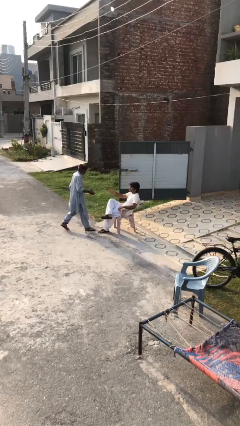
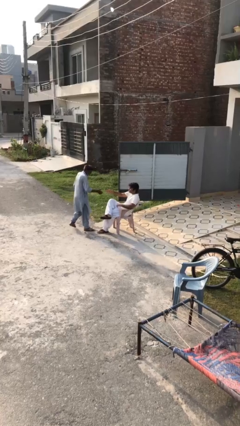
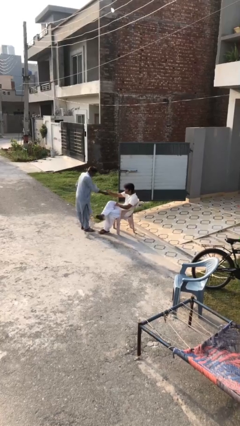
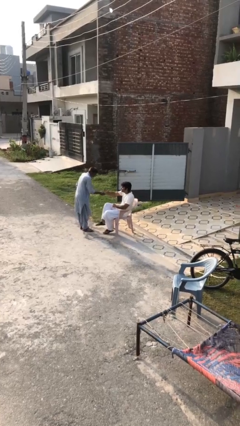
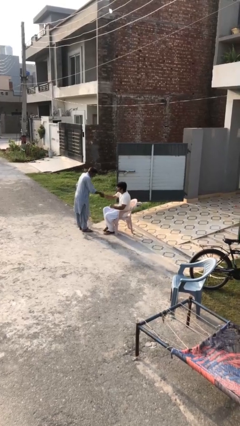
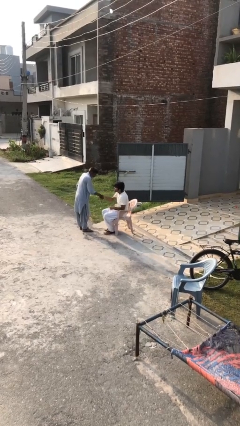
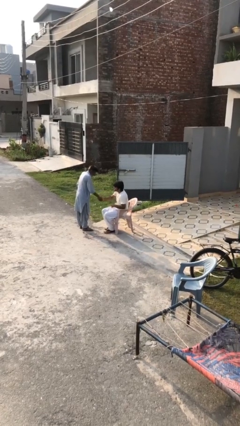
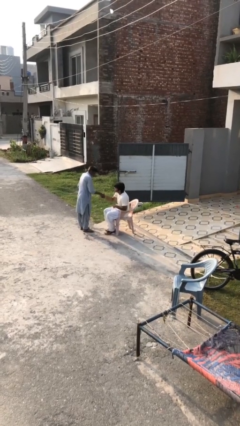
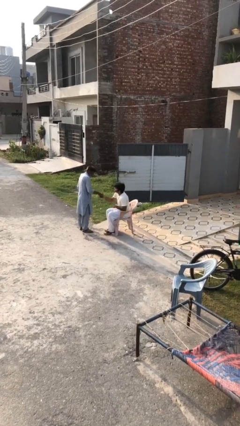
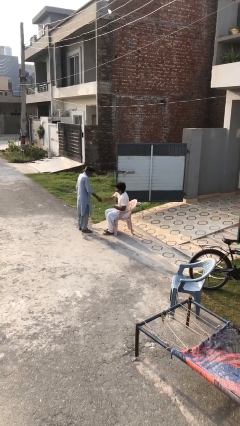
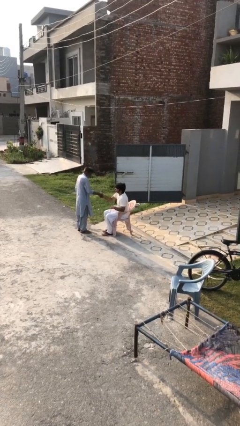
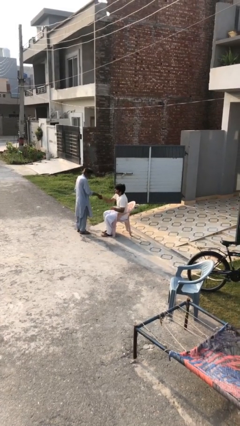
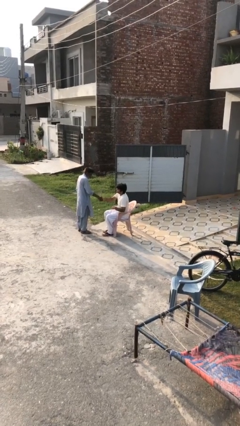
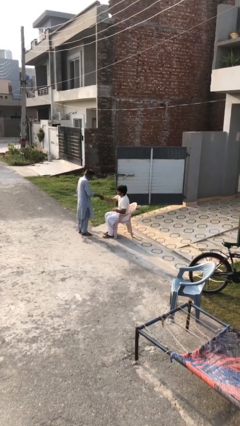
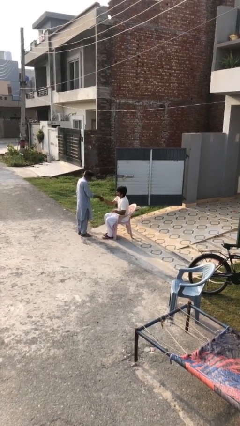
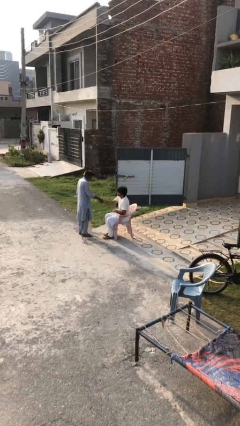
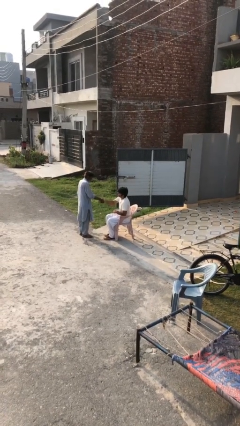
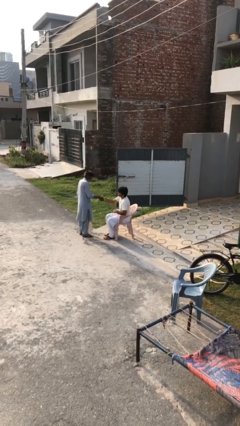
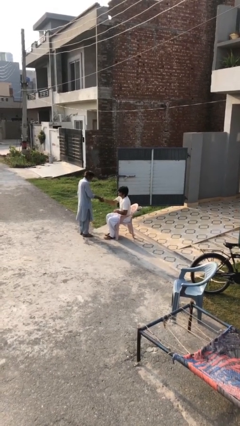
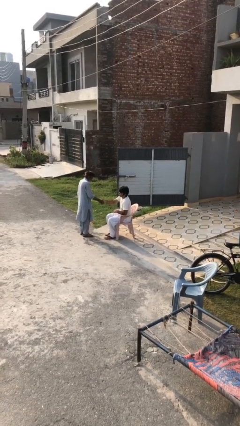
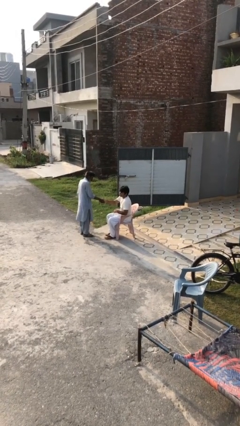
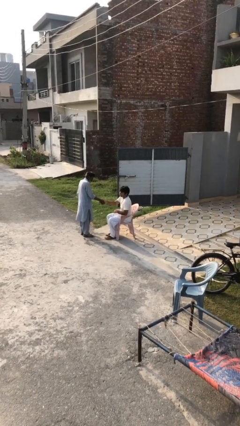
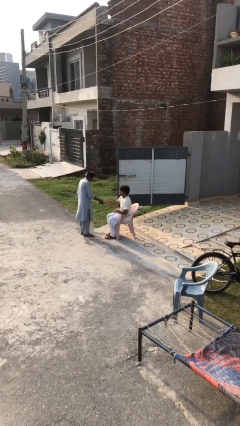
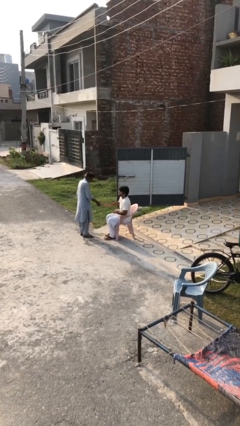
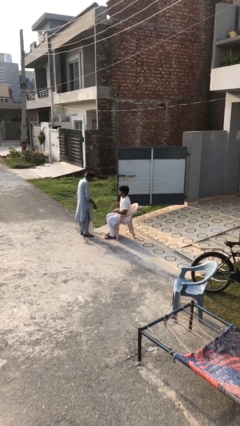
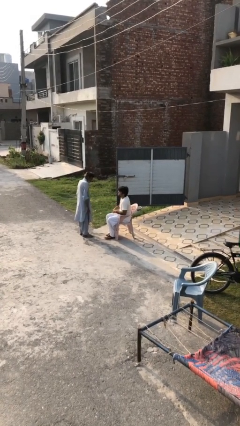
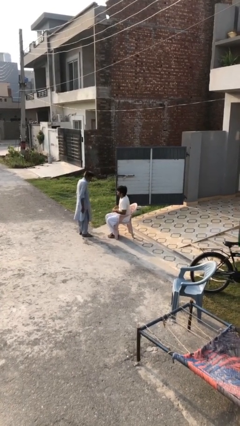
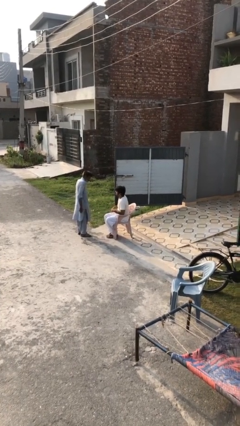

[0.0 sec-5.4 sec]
person shakes hand

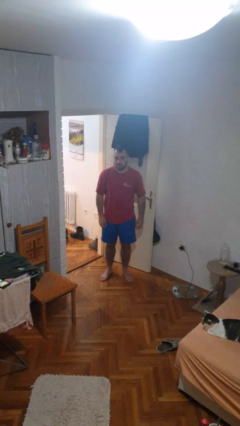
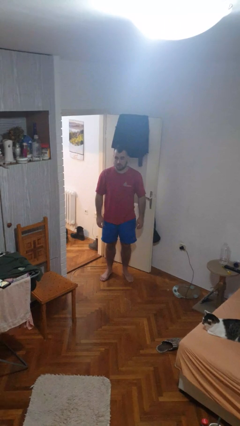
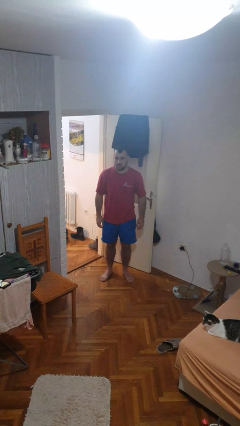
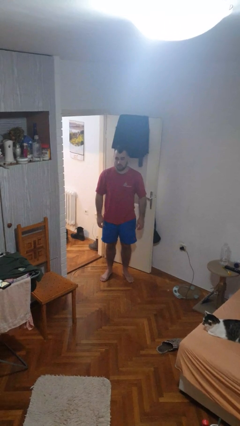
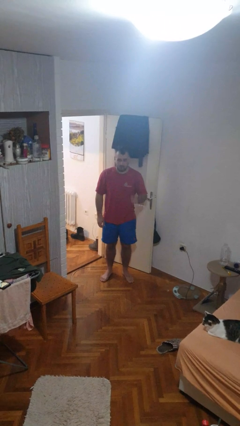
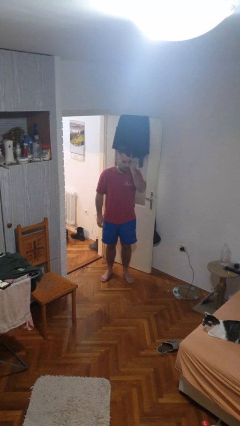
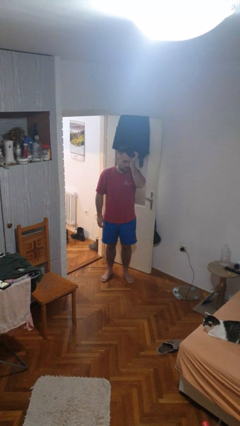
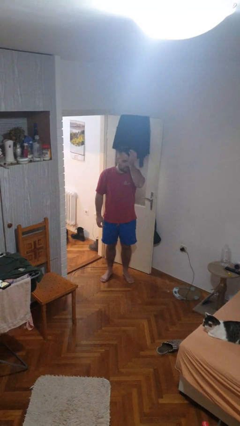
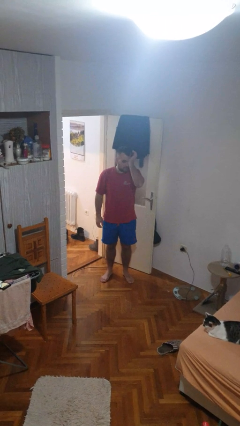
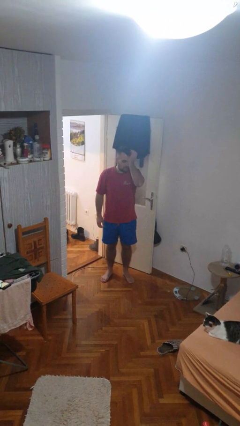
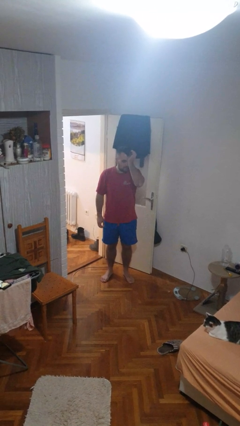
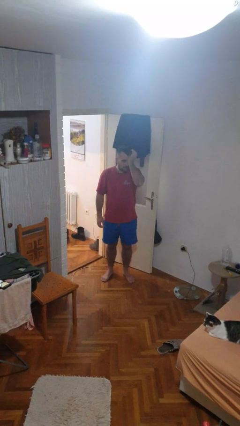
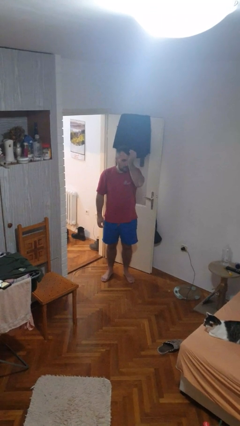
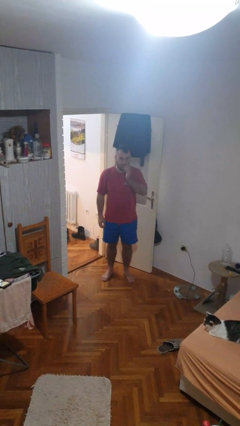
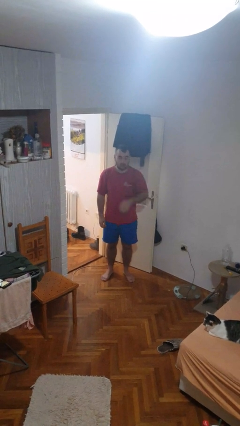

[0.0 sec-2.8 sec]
person rubs eyes

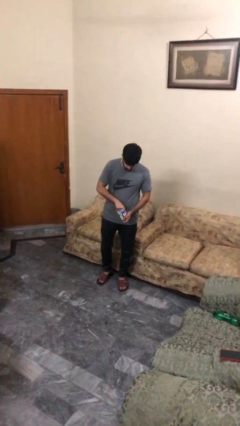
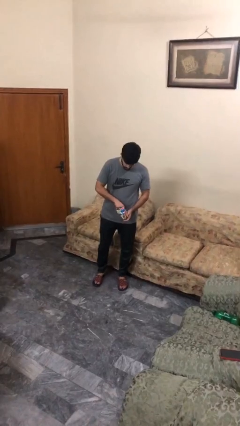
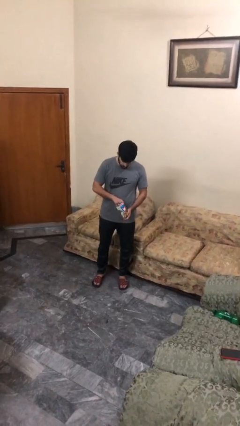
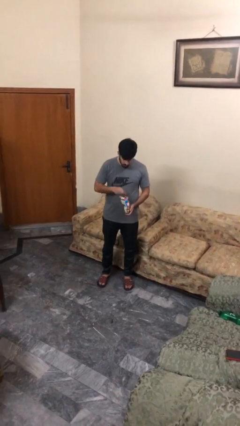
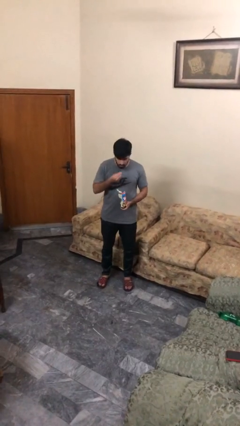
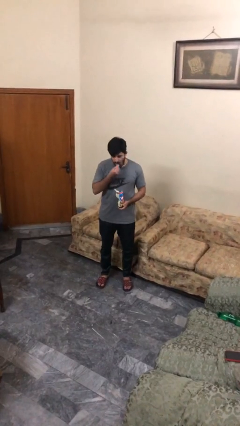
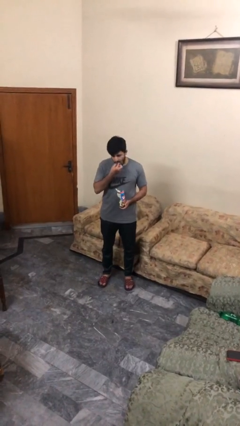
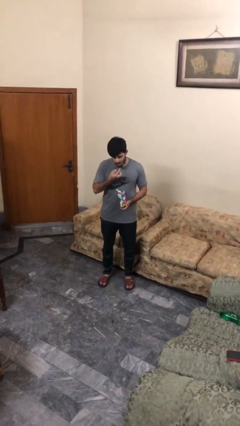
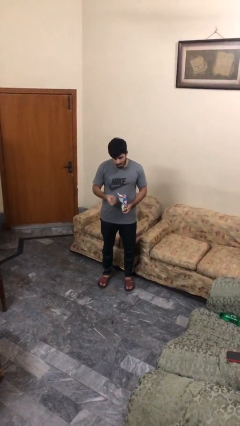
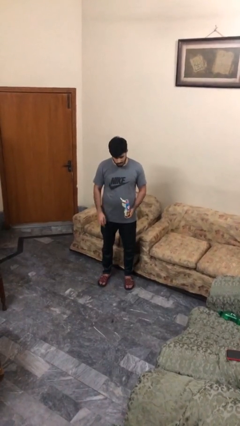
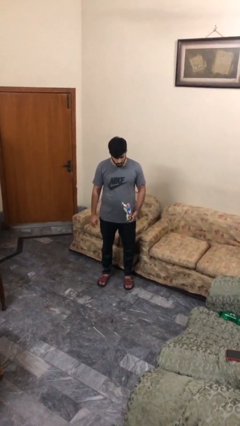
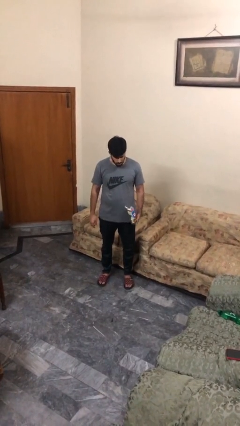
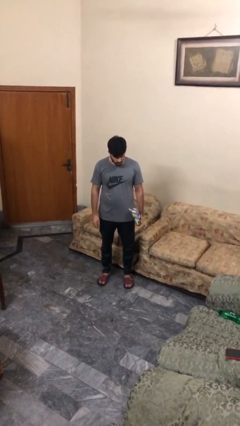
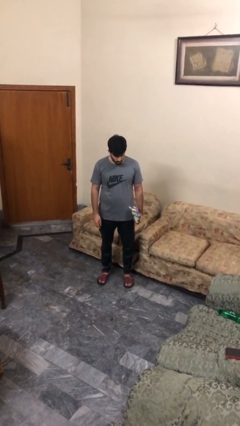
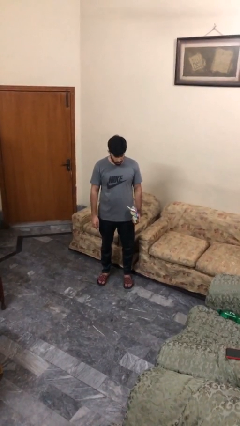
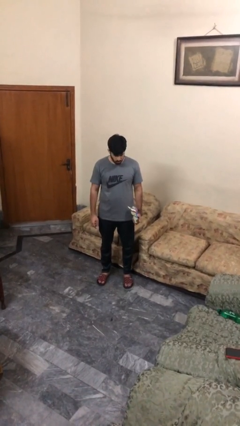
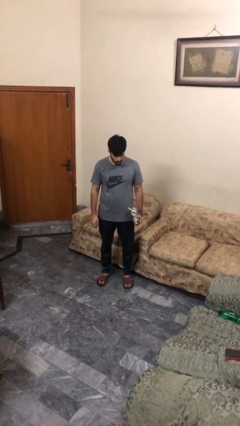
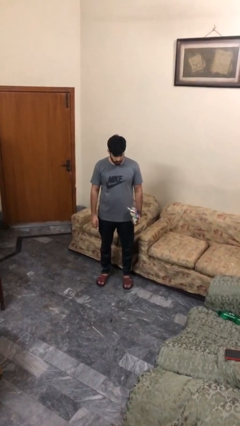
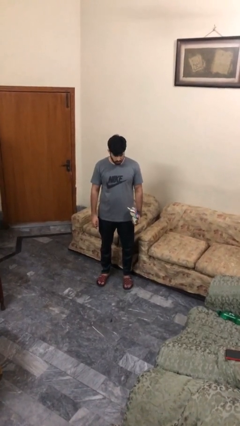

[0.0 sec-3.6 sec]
person eats snack from bag

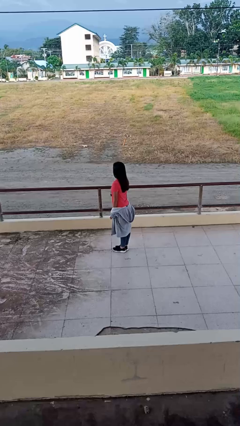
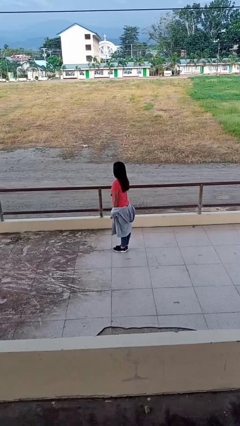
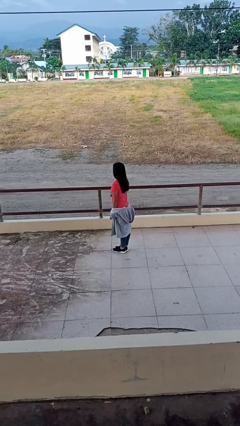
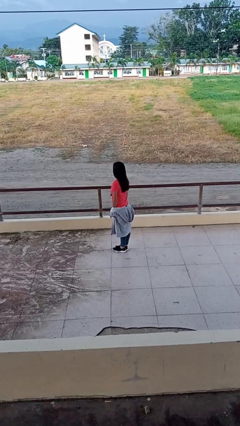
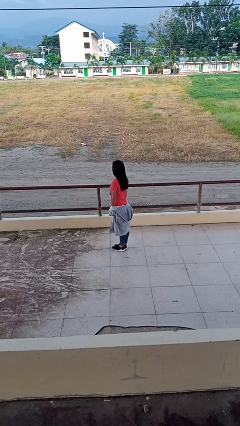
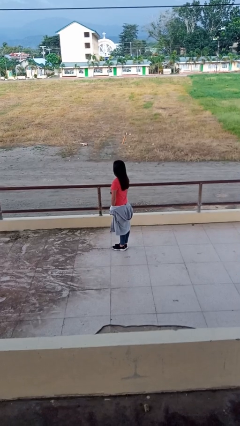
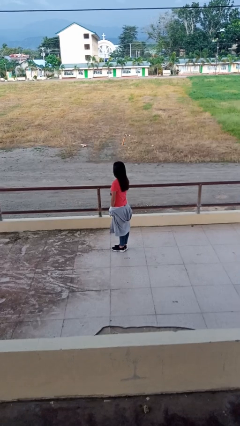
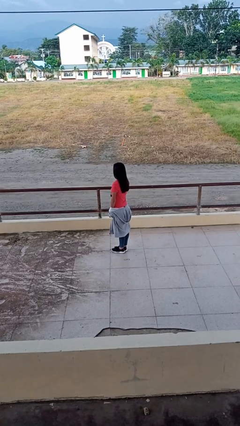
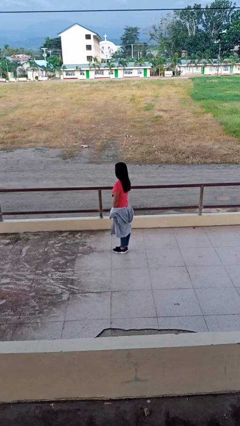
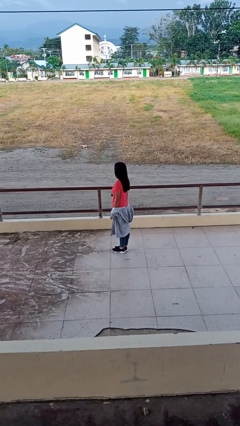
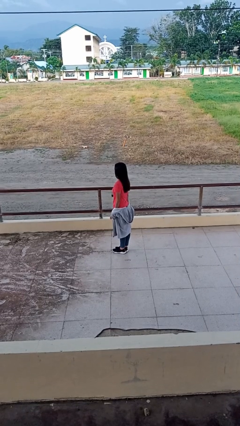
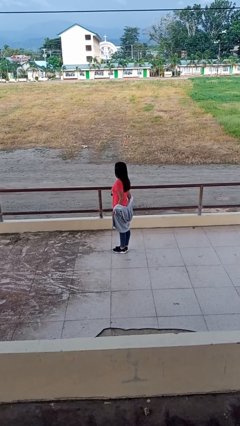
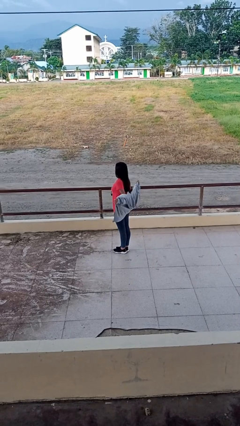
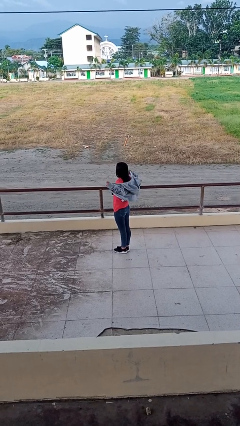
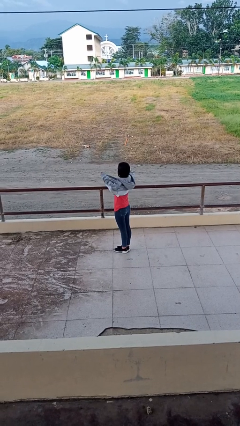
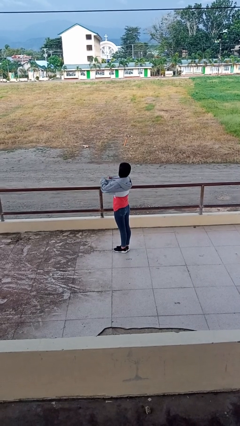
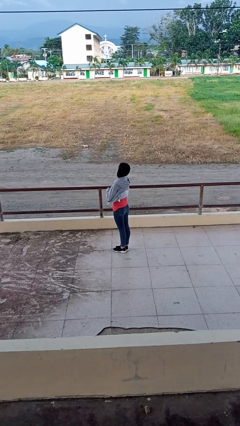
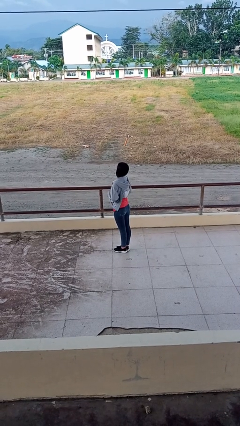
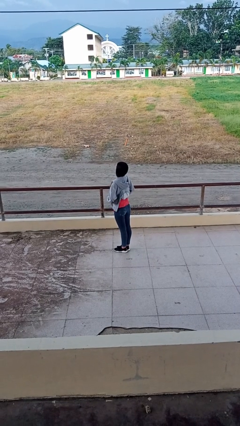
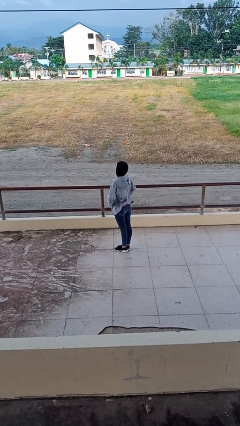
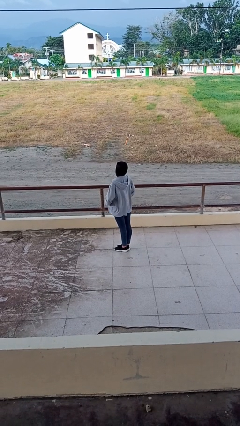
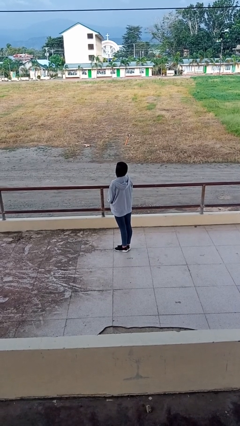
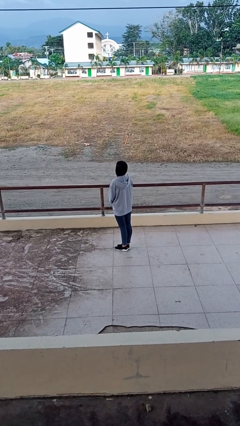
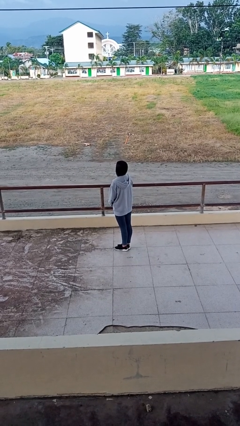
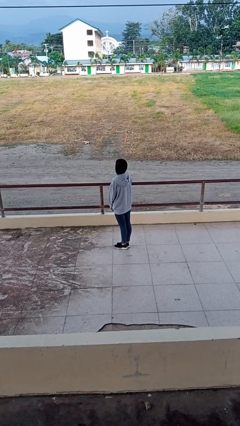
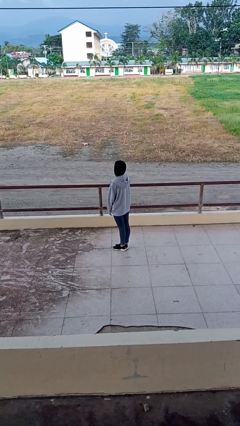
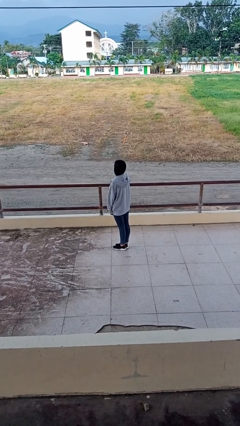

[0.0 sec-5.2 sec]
person puts on jacket

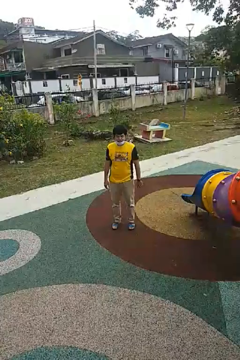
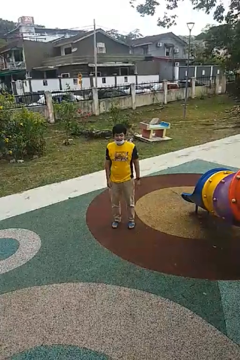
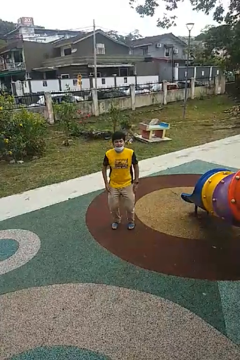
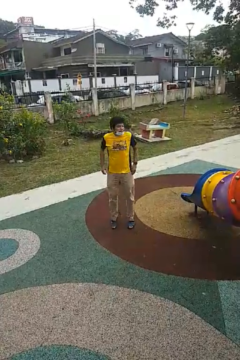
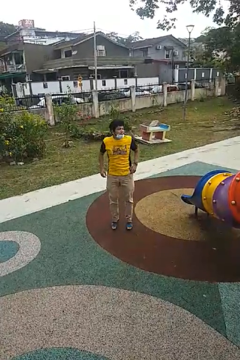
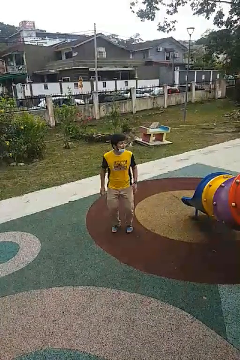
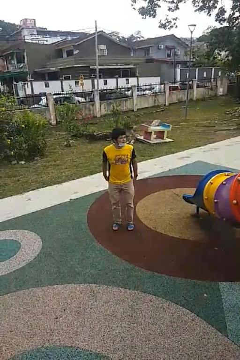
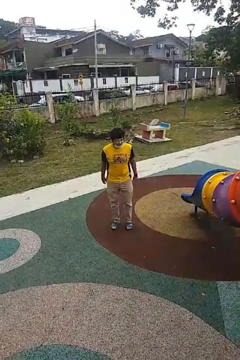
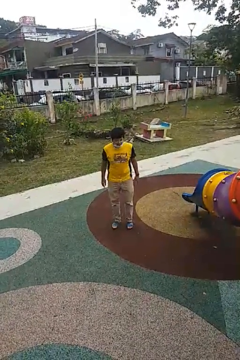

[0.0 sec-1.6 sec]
person jumps
